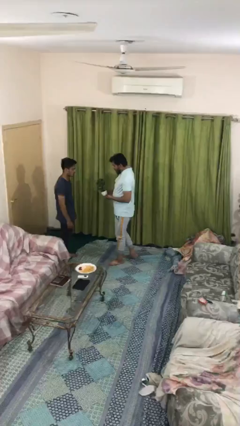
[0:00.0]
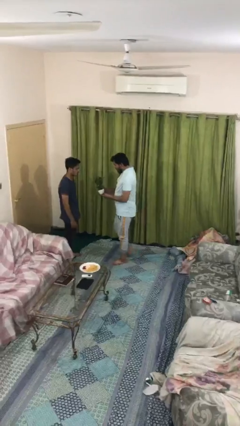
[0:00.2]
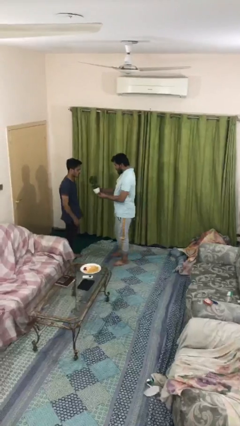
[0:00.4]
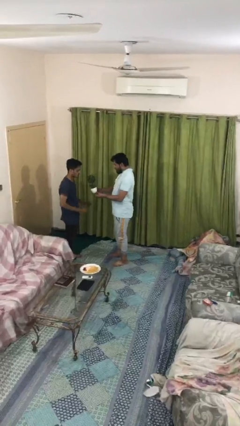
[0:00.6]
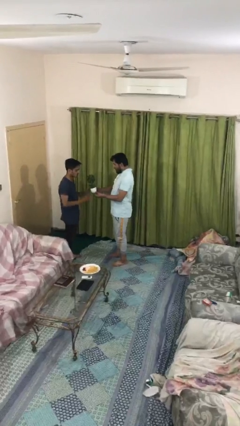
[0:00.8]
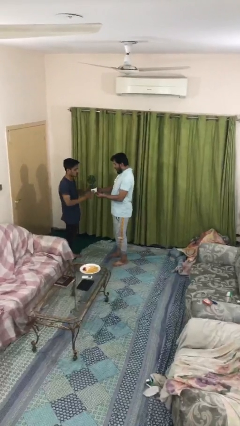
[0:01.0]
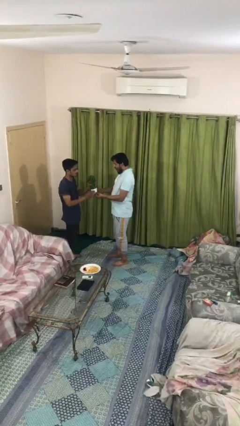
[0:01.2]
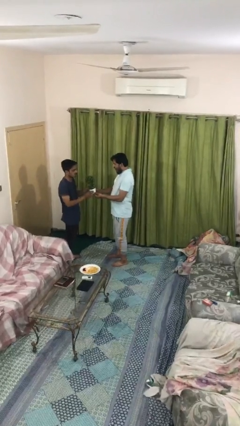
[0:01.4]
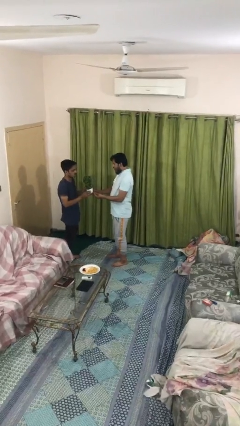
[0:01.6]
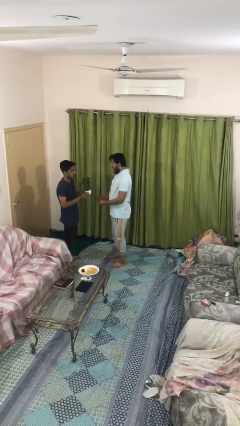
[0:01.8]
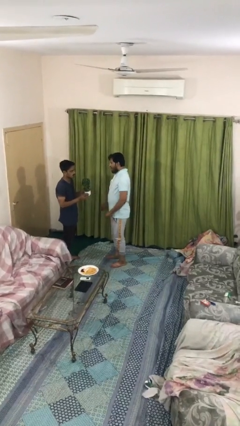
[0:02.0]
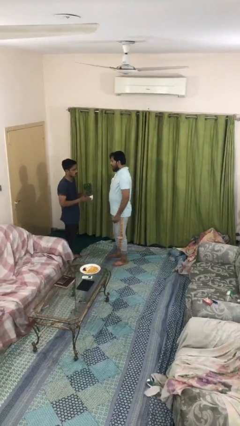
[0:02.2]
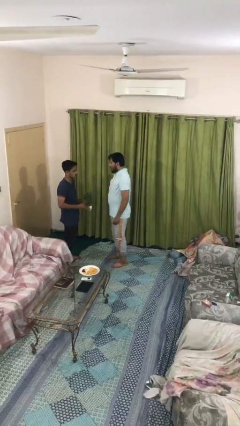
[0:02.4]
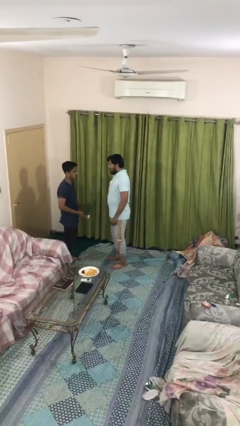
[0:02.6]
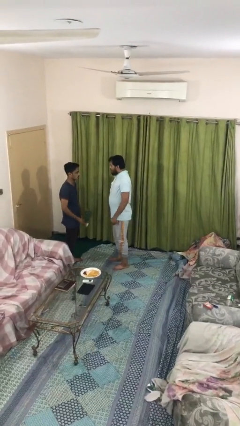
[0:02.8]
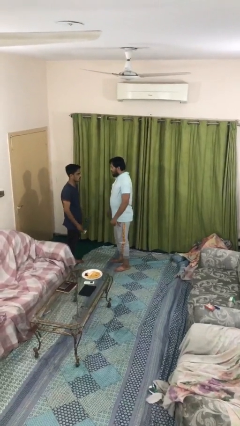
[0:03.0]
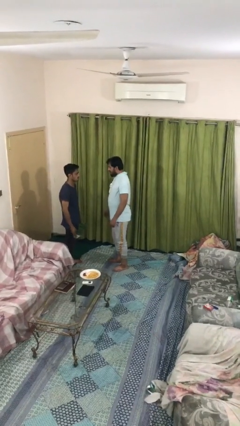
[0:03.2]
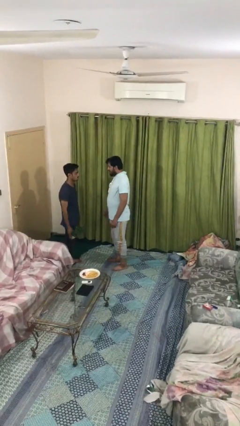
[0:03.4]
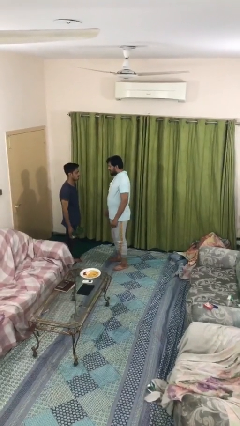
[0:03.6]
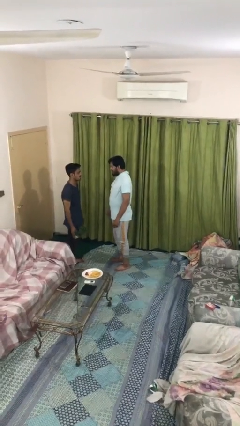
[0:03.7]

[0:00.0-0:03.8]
person transfers object to person

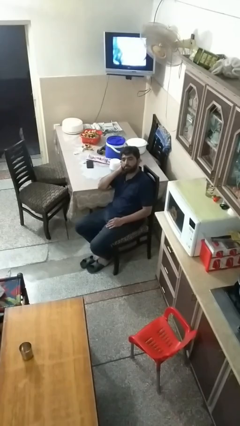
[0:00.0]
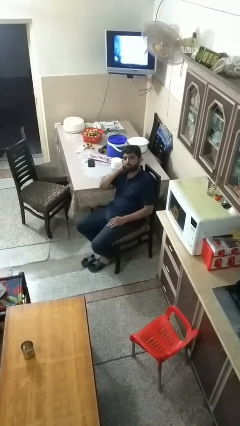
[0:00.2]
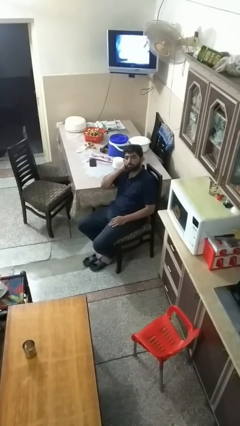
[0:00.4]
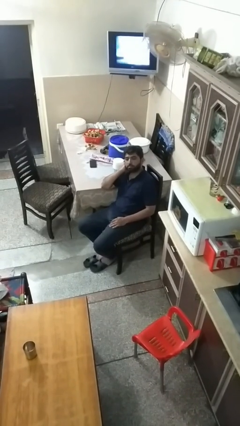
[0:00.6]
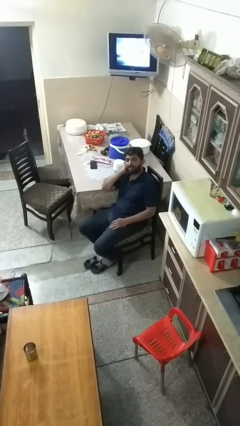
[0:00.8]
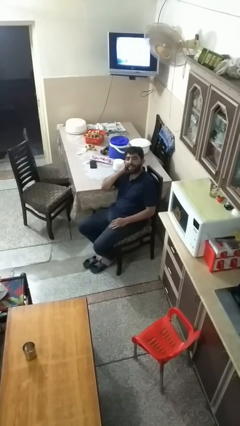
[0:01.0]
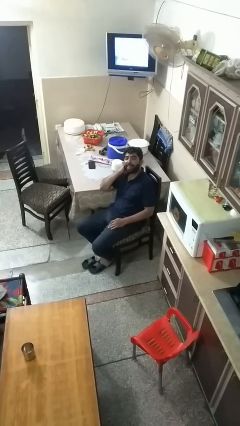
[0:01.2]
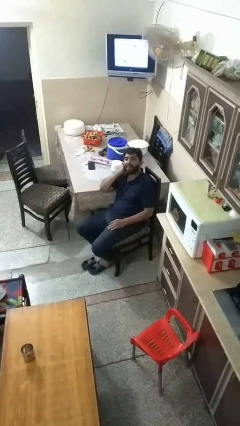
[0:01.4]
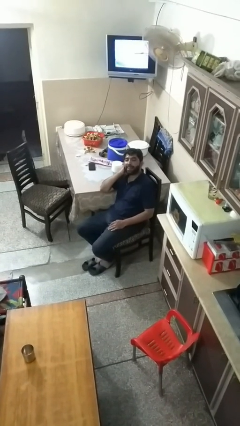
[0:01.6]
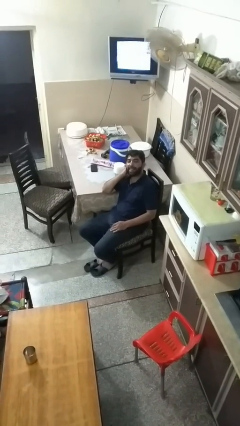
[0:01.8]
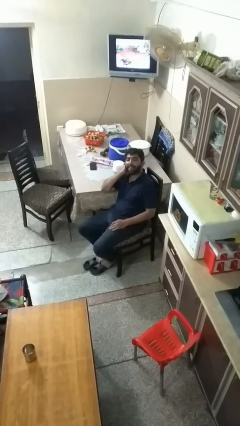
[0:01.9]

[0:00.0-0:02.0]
person sticks out tongue

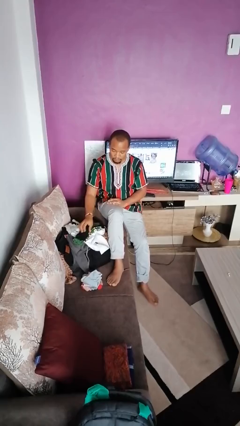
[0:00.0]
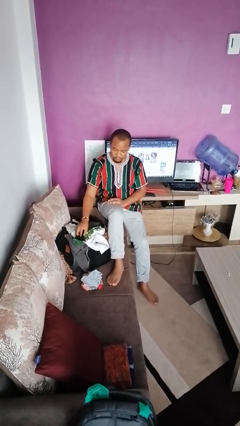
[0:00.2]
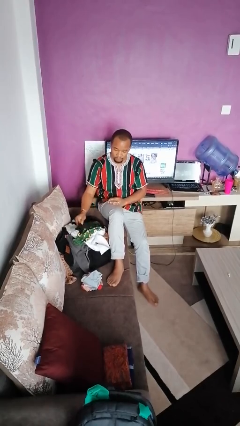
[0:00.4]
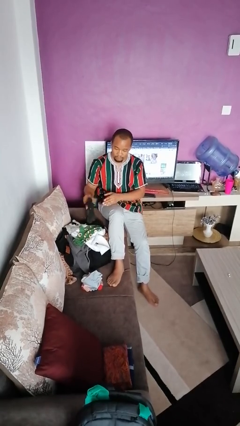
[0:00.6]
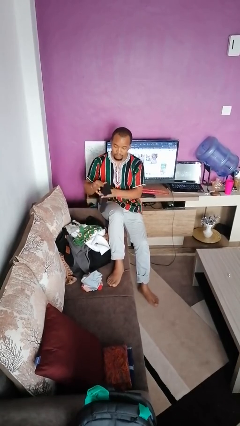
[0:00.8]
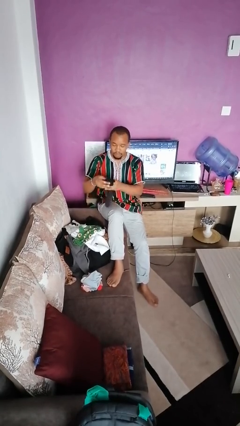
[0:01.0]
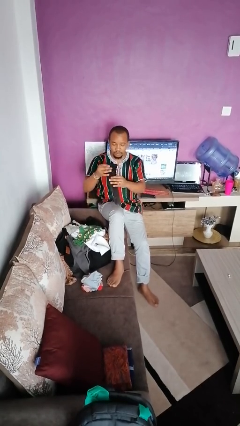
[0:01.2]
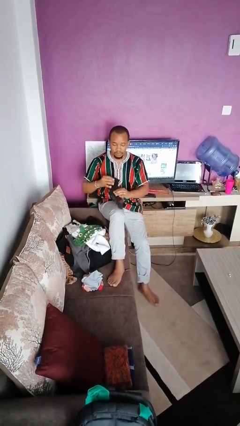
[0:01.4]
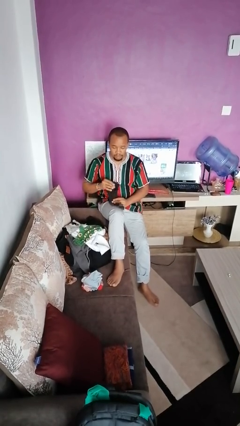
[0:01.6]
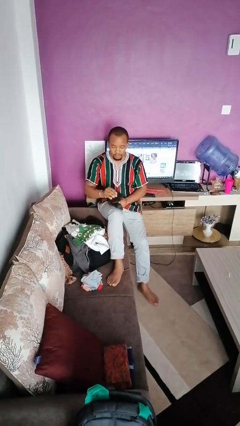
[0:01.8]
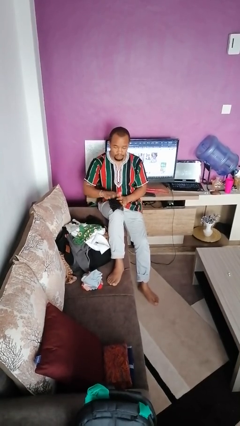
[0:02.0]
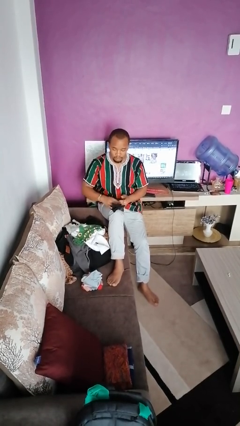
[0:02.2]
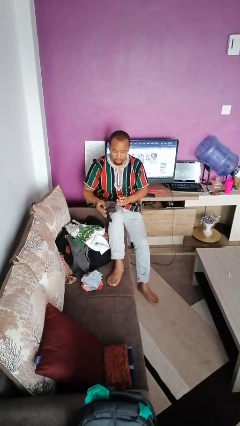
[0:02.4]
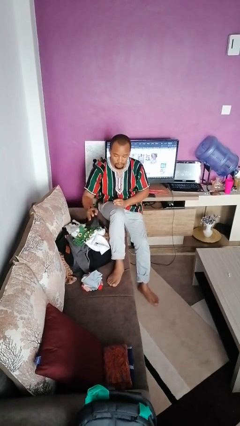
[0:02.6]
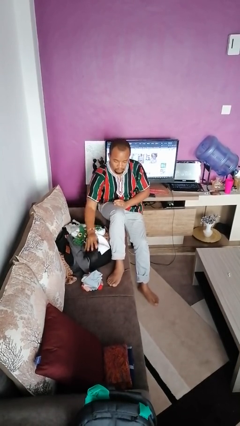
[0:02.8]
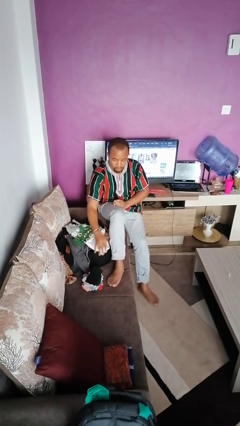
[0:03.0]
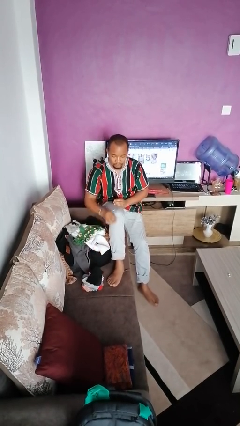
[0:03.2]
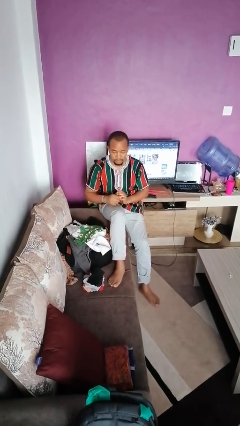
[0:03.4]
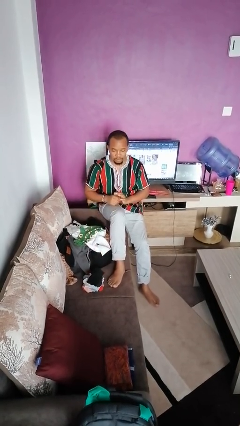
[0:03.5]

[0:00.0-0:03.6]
person folds socks

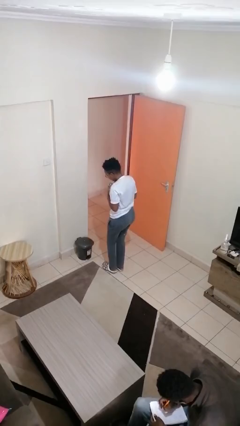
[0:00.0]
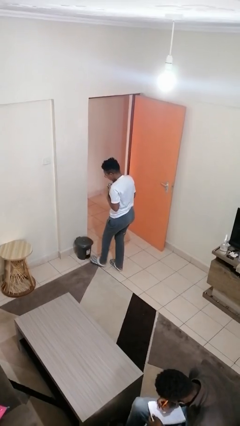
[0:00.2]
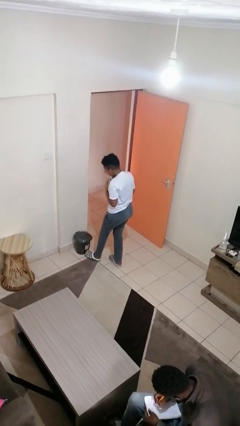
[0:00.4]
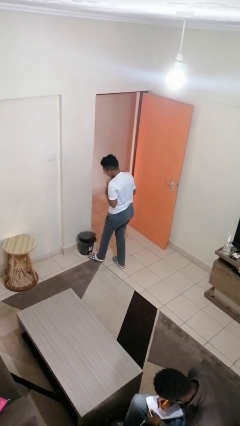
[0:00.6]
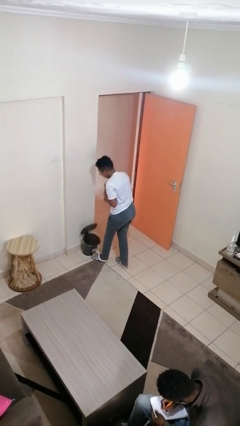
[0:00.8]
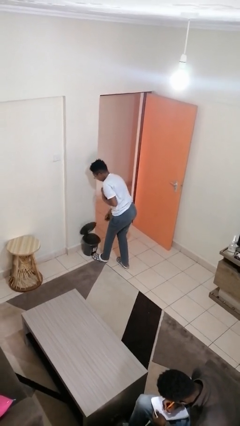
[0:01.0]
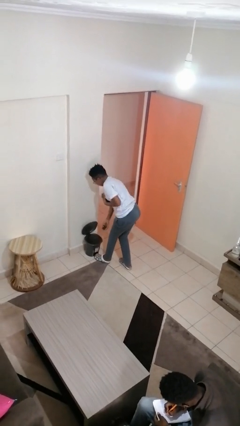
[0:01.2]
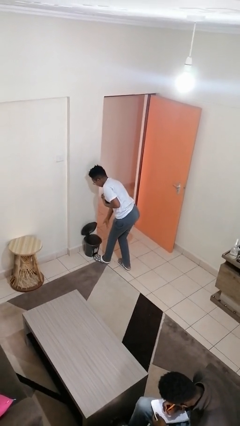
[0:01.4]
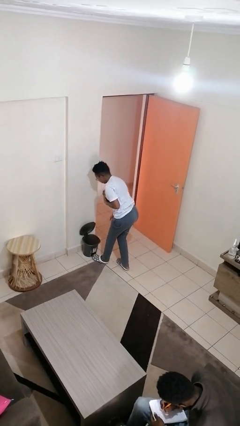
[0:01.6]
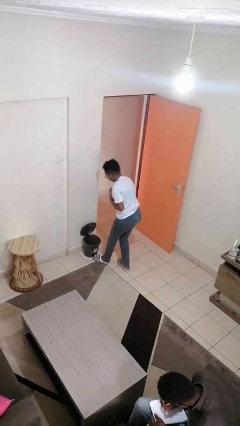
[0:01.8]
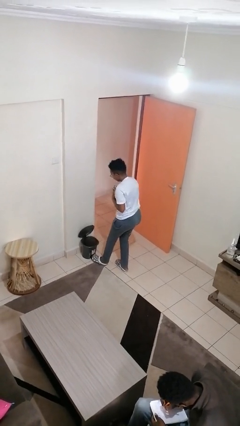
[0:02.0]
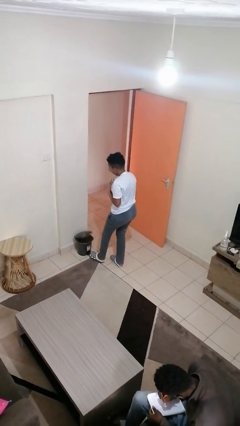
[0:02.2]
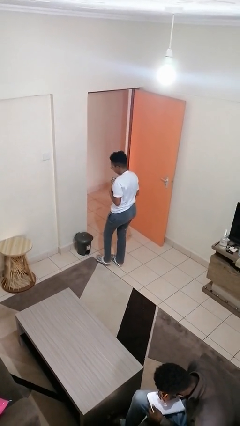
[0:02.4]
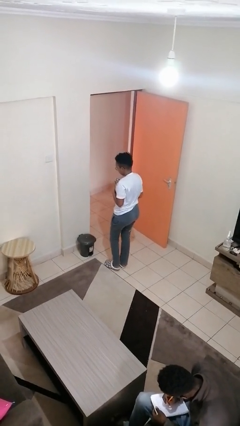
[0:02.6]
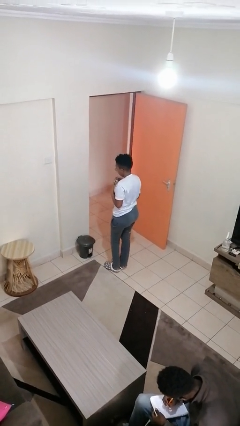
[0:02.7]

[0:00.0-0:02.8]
person discards trash

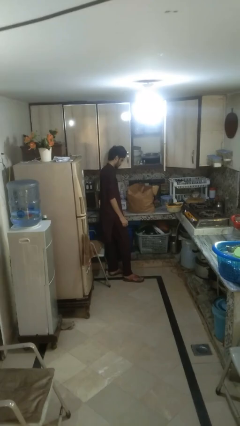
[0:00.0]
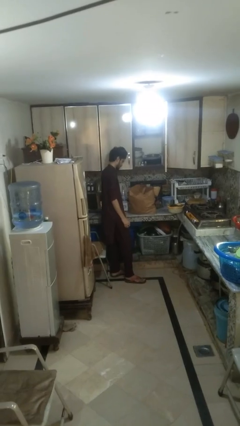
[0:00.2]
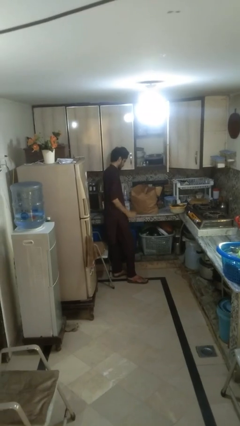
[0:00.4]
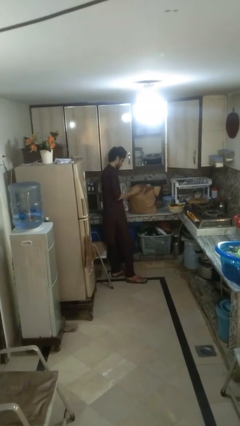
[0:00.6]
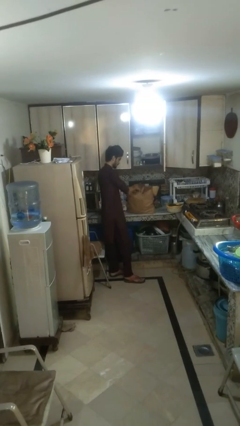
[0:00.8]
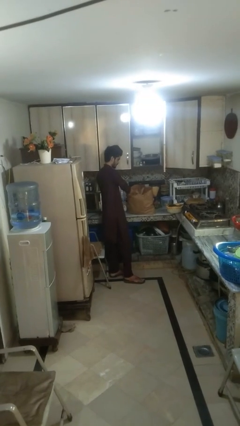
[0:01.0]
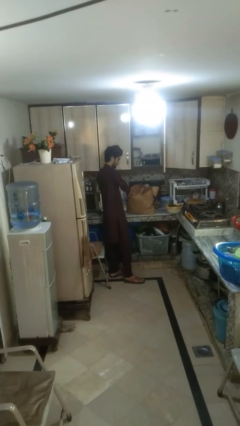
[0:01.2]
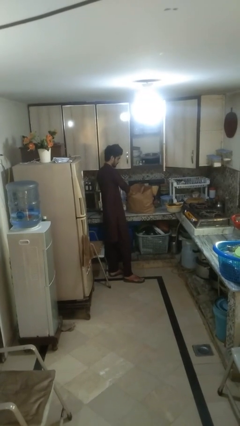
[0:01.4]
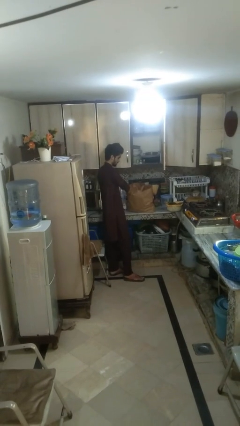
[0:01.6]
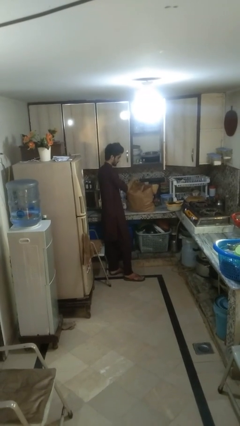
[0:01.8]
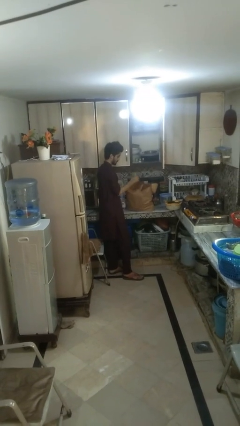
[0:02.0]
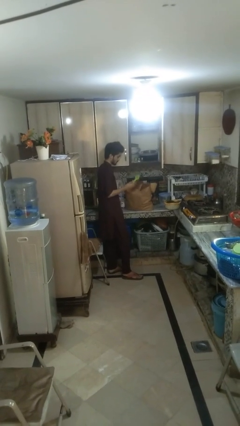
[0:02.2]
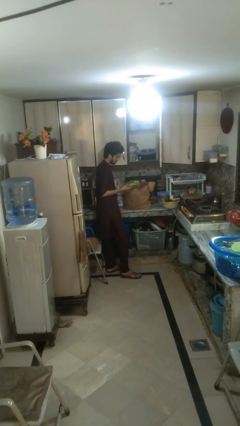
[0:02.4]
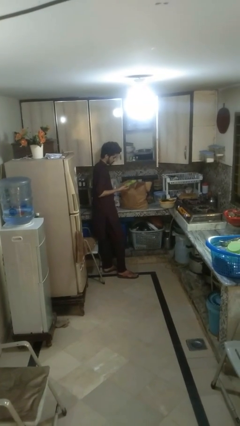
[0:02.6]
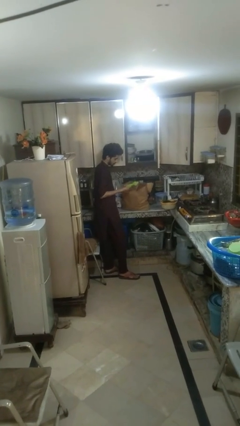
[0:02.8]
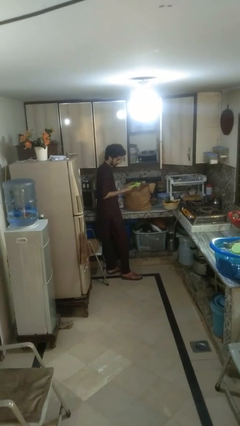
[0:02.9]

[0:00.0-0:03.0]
person takes object from bag

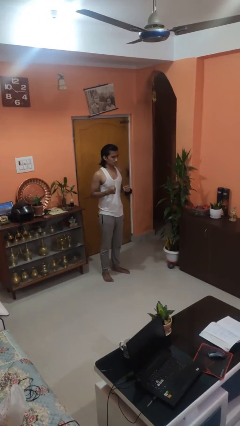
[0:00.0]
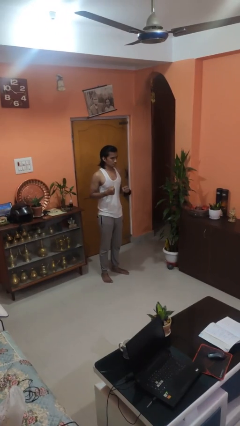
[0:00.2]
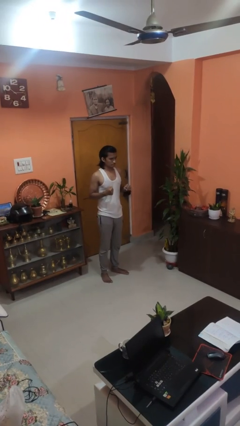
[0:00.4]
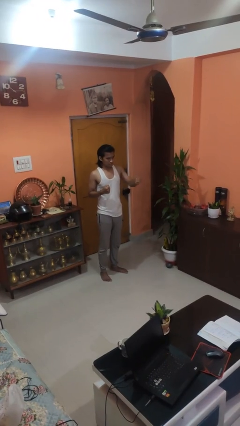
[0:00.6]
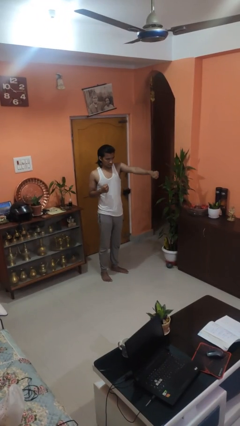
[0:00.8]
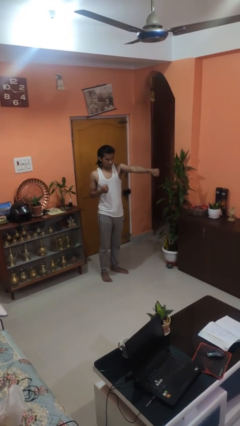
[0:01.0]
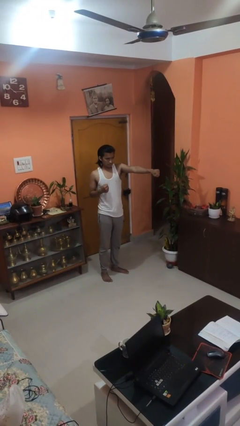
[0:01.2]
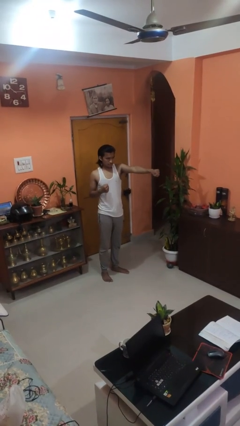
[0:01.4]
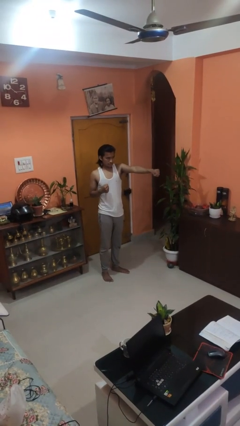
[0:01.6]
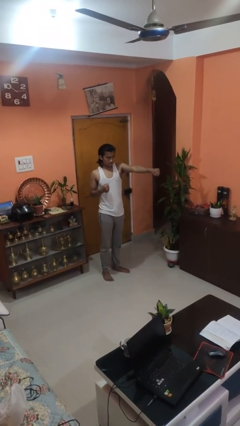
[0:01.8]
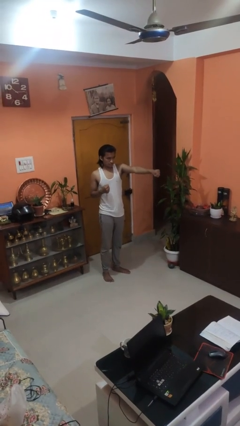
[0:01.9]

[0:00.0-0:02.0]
person punches

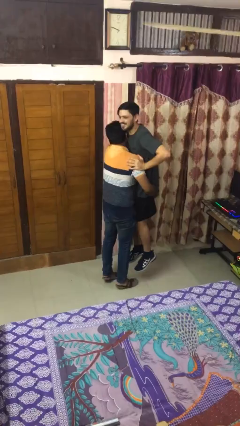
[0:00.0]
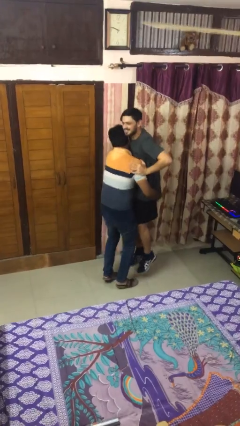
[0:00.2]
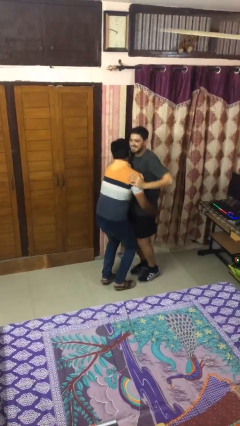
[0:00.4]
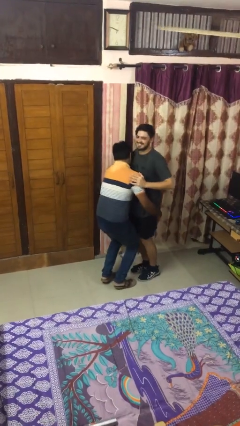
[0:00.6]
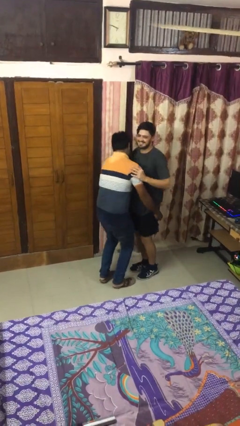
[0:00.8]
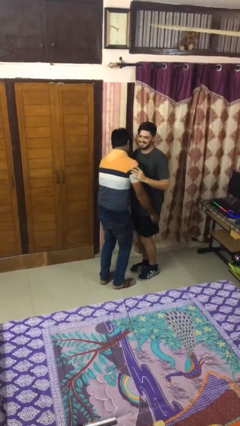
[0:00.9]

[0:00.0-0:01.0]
person puts down person
